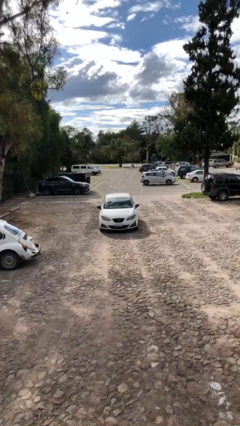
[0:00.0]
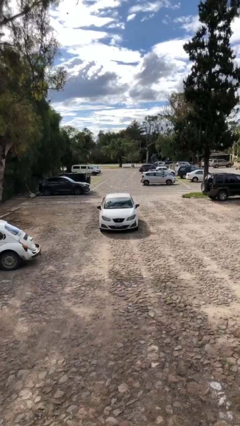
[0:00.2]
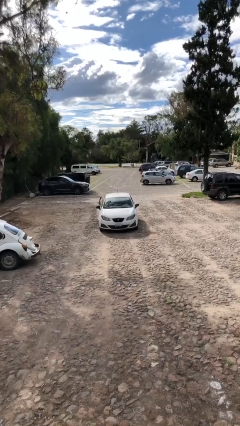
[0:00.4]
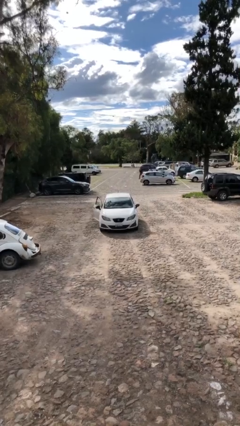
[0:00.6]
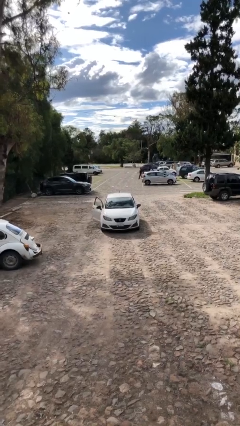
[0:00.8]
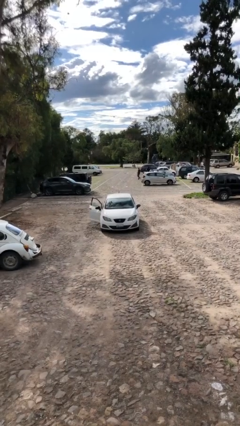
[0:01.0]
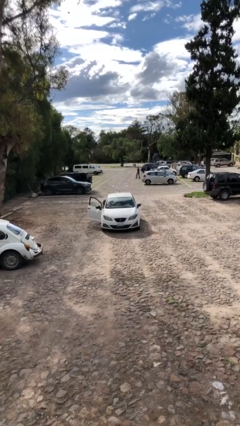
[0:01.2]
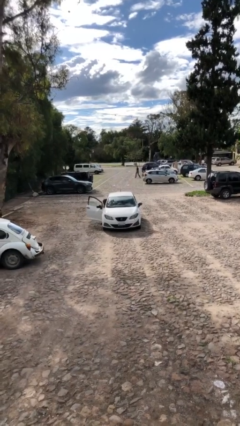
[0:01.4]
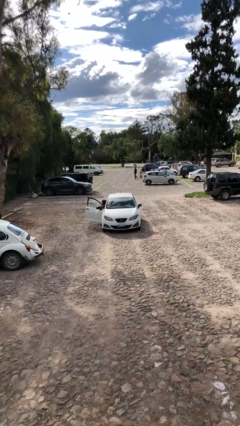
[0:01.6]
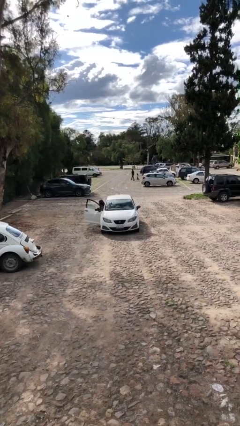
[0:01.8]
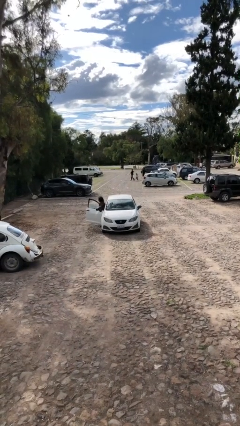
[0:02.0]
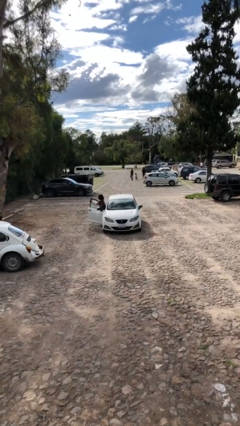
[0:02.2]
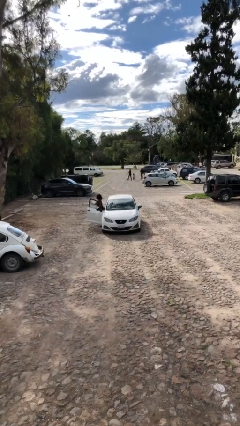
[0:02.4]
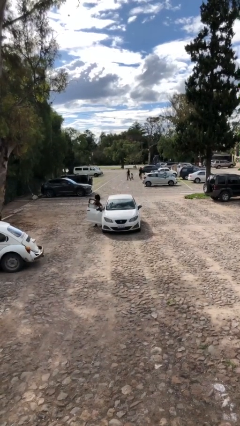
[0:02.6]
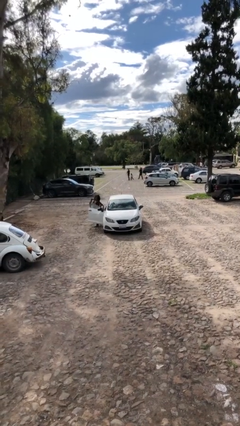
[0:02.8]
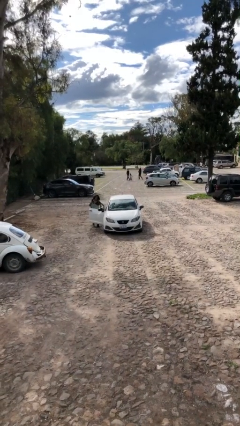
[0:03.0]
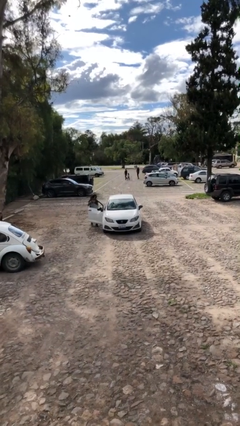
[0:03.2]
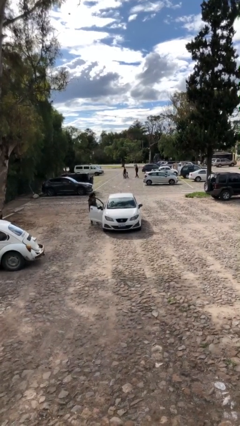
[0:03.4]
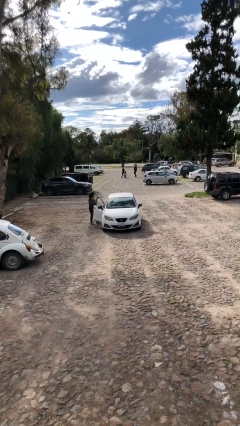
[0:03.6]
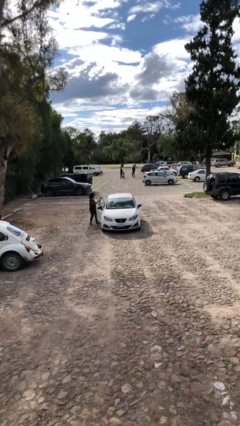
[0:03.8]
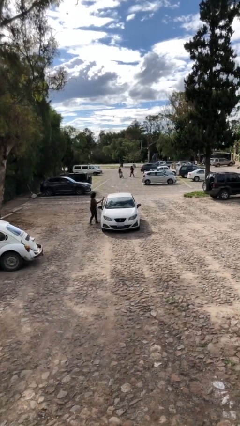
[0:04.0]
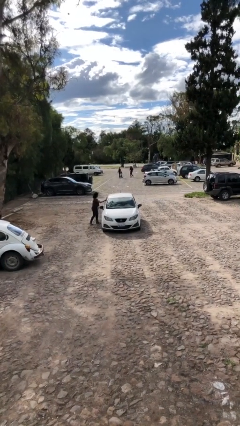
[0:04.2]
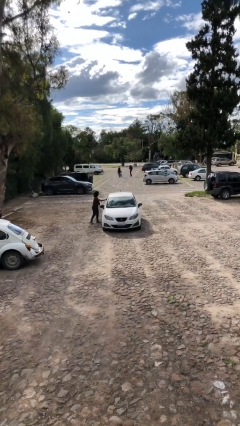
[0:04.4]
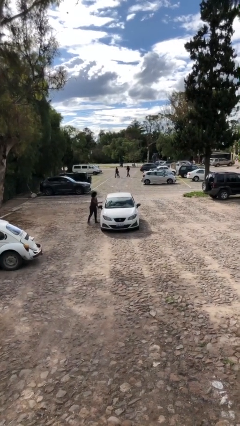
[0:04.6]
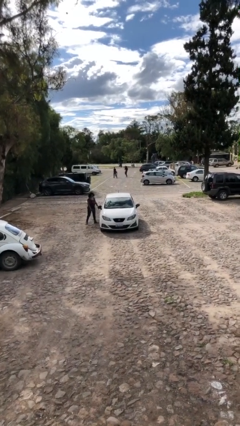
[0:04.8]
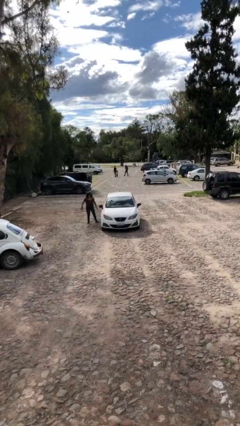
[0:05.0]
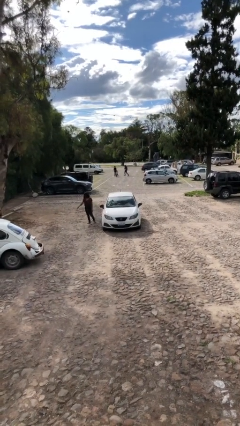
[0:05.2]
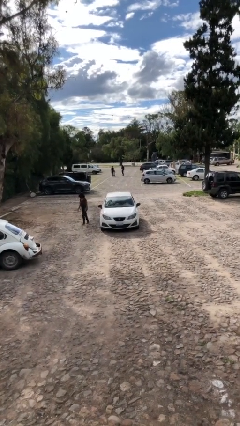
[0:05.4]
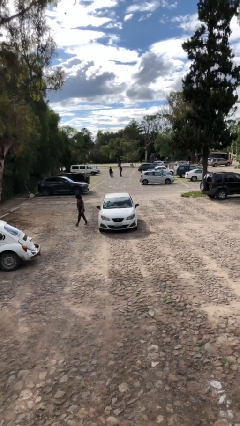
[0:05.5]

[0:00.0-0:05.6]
car drops off person

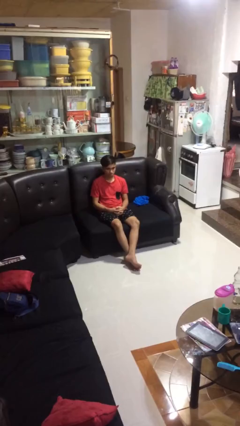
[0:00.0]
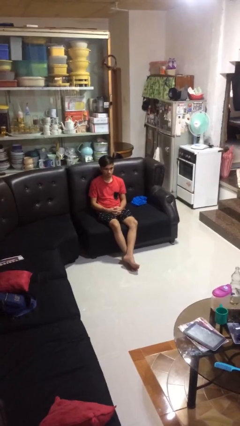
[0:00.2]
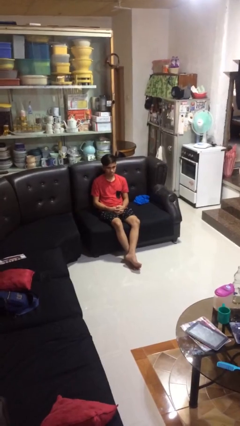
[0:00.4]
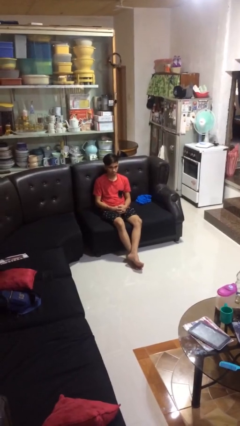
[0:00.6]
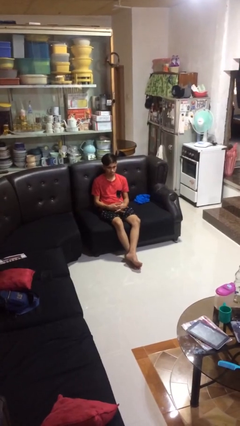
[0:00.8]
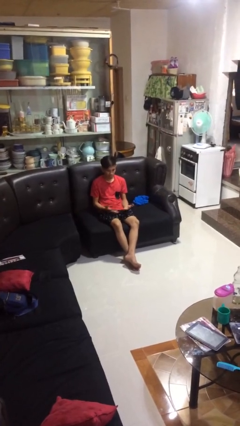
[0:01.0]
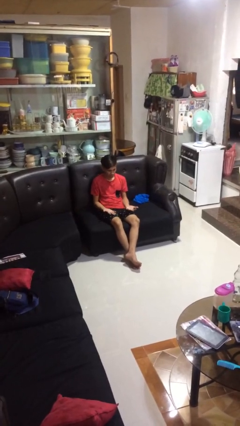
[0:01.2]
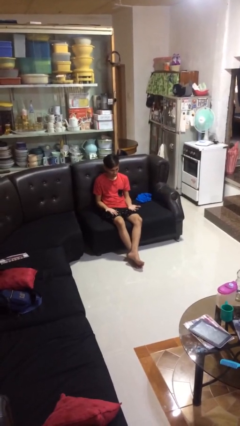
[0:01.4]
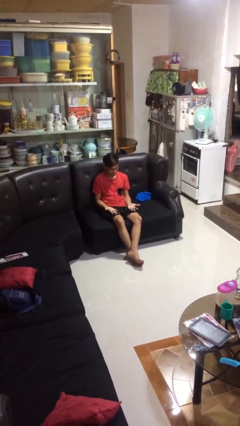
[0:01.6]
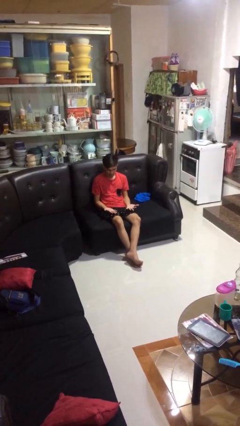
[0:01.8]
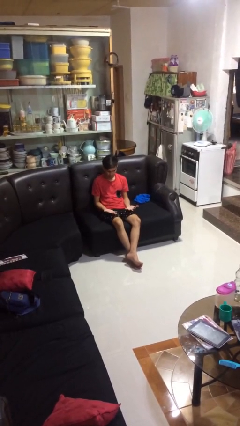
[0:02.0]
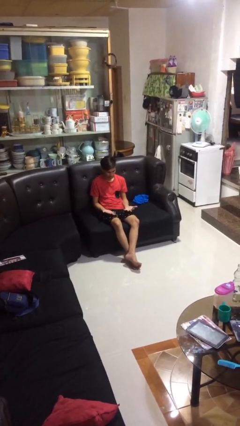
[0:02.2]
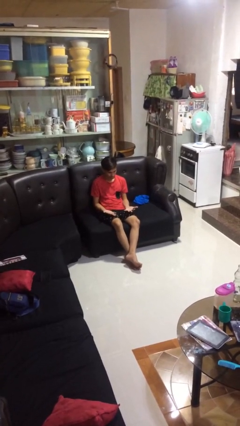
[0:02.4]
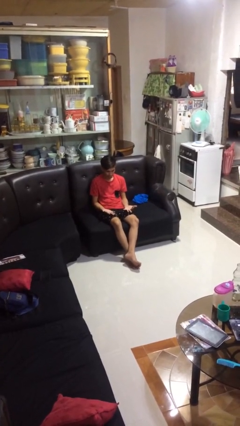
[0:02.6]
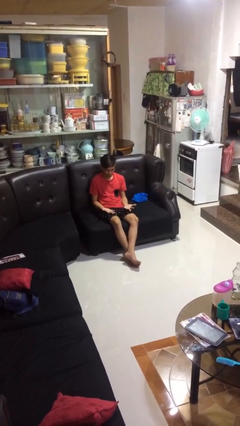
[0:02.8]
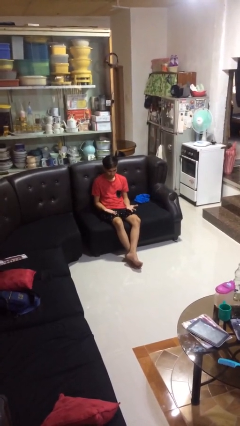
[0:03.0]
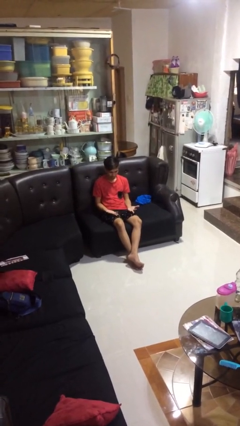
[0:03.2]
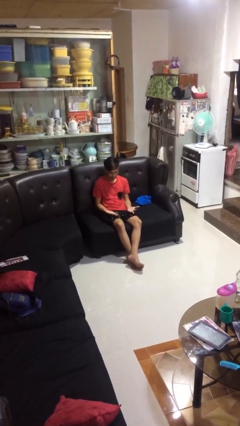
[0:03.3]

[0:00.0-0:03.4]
person looks at hands in lap

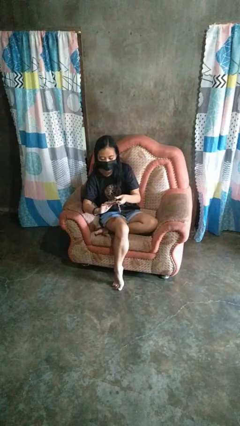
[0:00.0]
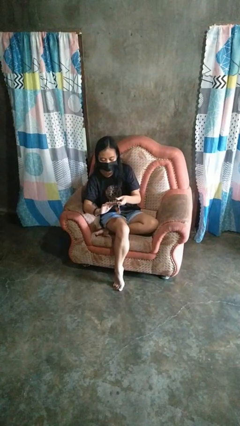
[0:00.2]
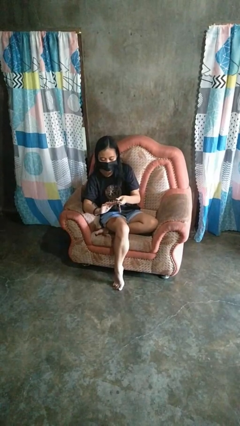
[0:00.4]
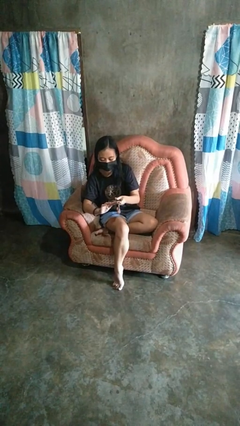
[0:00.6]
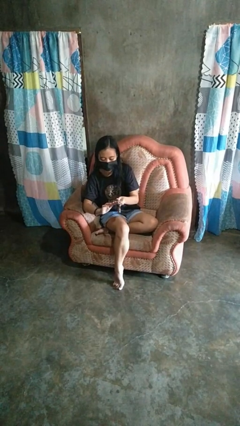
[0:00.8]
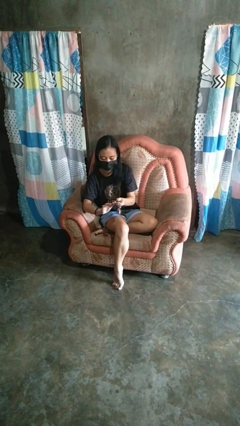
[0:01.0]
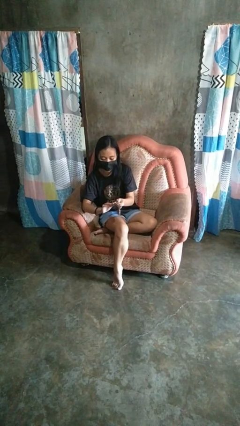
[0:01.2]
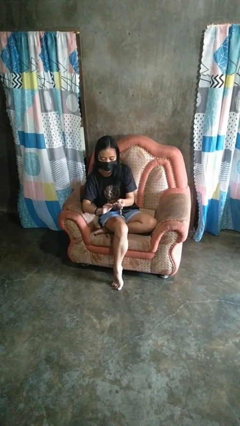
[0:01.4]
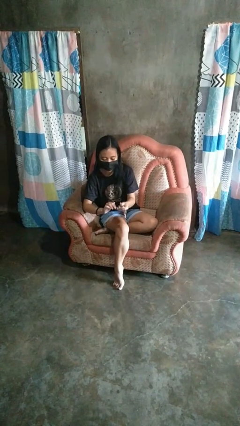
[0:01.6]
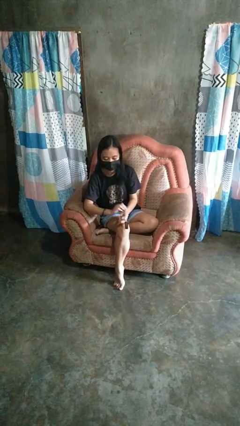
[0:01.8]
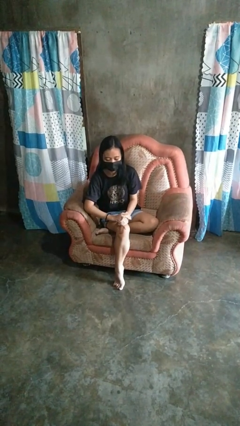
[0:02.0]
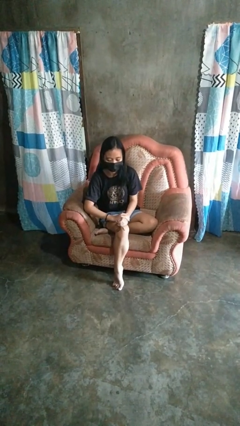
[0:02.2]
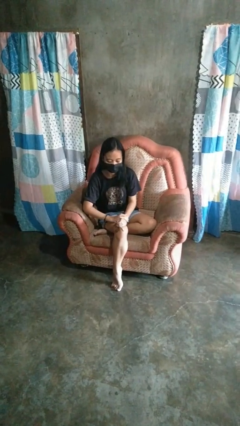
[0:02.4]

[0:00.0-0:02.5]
person clips fingernails

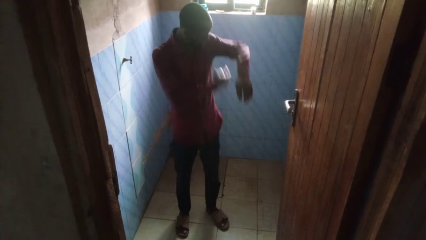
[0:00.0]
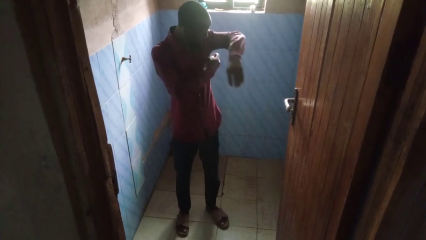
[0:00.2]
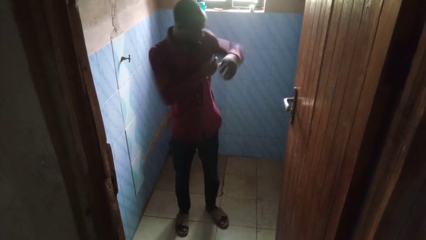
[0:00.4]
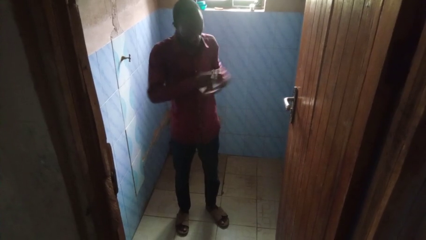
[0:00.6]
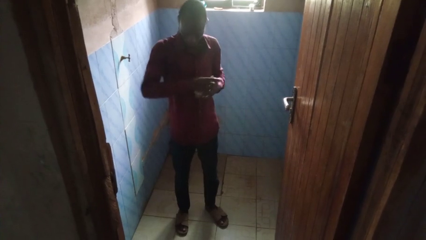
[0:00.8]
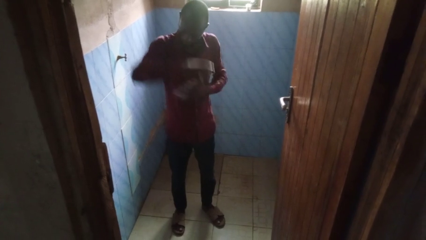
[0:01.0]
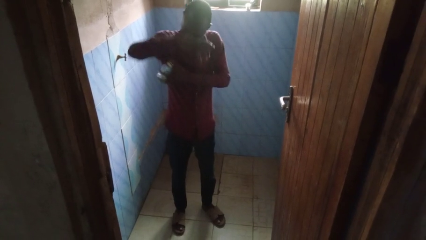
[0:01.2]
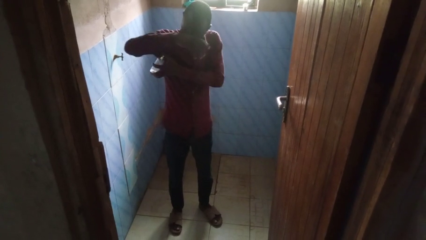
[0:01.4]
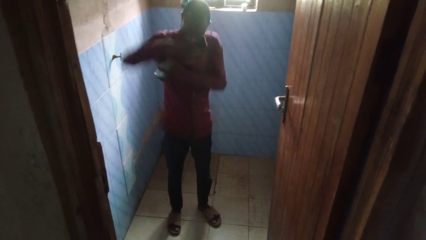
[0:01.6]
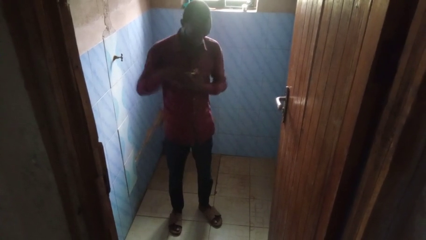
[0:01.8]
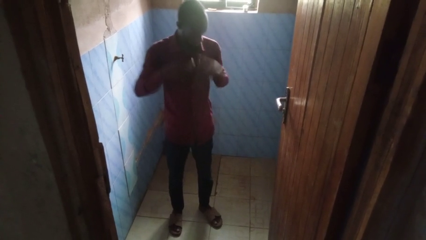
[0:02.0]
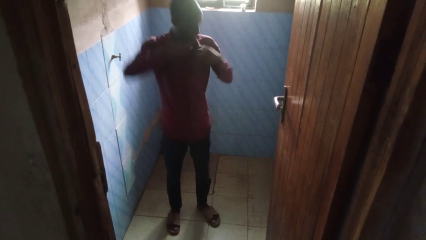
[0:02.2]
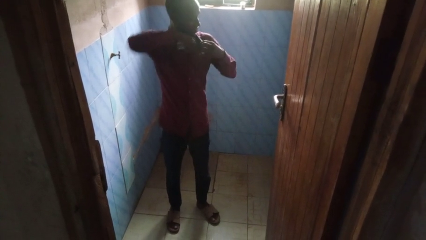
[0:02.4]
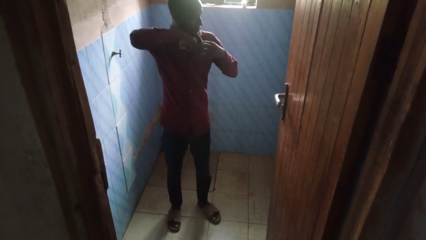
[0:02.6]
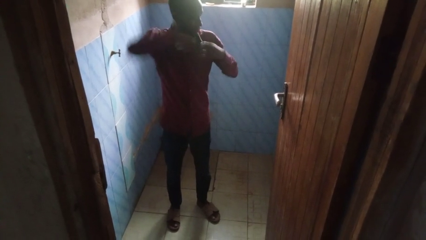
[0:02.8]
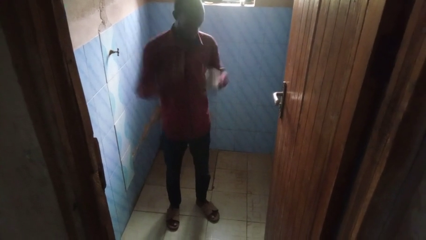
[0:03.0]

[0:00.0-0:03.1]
person applies deodorant

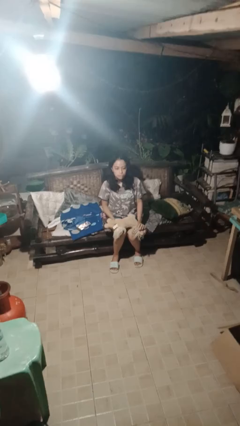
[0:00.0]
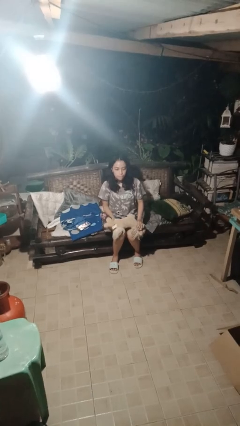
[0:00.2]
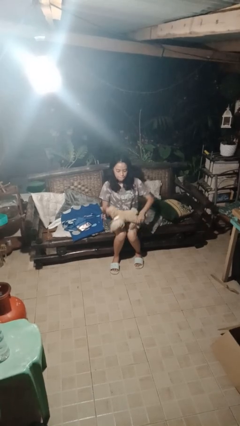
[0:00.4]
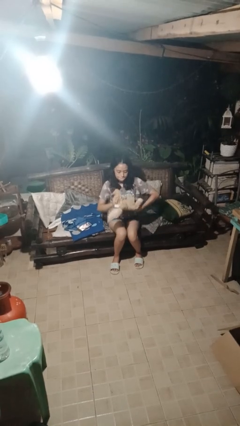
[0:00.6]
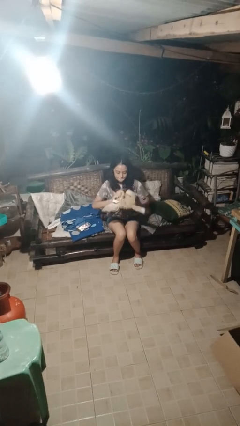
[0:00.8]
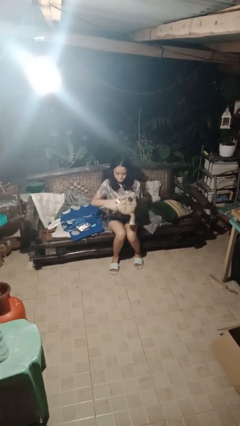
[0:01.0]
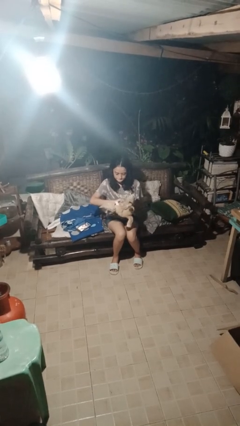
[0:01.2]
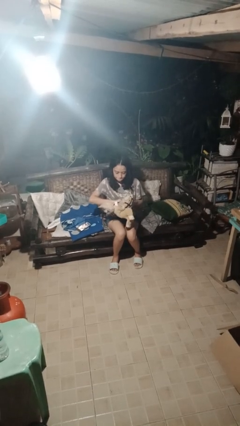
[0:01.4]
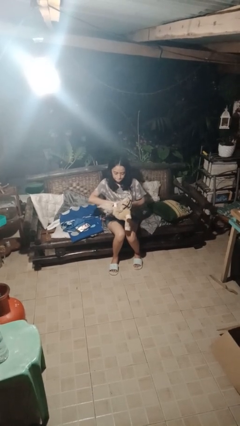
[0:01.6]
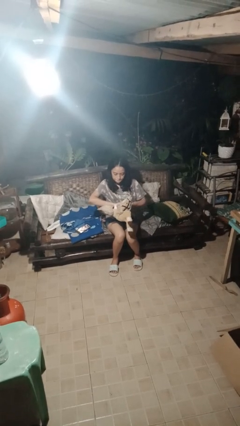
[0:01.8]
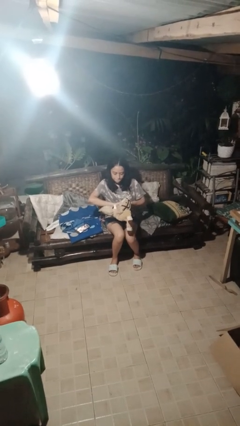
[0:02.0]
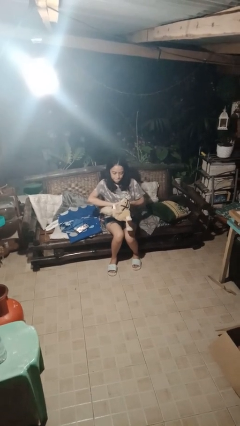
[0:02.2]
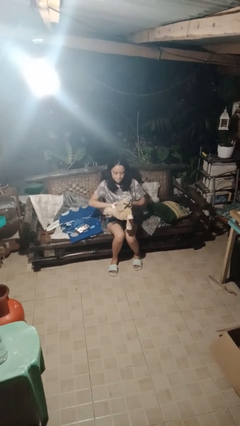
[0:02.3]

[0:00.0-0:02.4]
person squeezes object

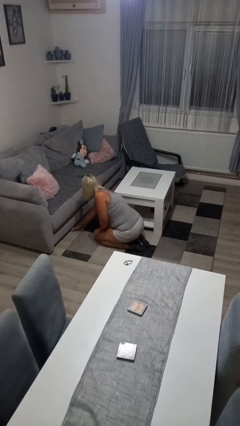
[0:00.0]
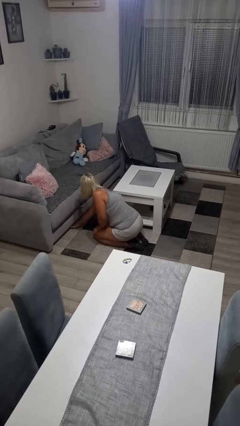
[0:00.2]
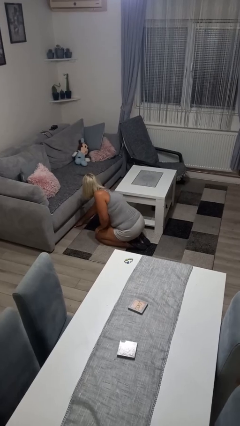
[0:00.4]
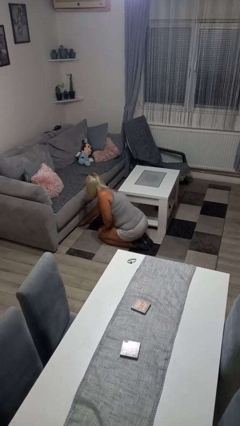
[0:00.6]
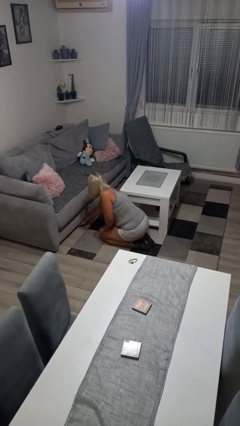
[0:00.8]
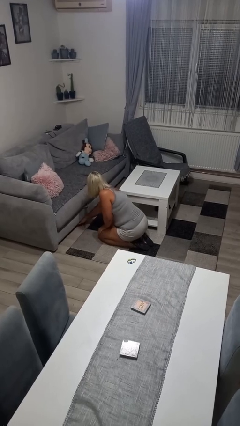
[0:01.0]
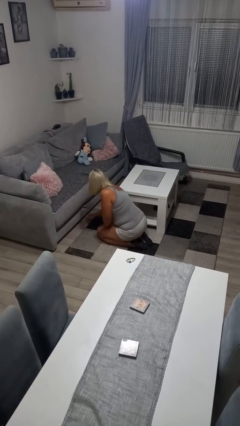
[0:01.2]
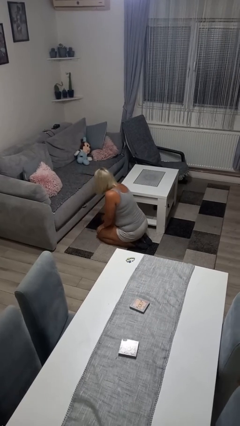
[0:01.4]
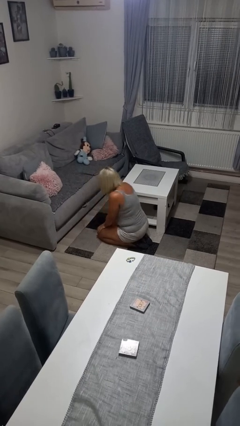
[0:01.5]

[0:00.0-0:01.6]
person searches under couch
